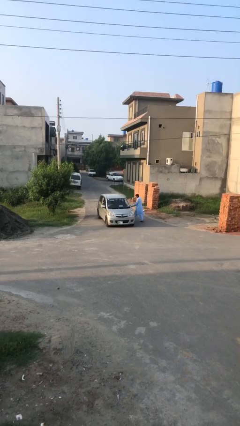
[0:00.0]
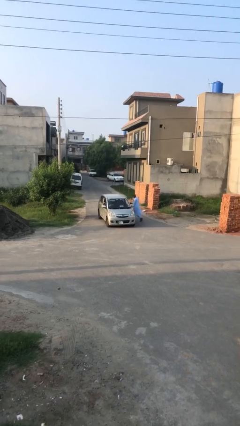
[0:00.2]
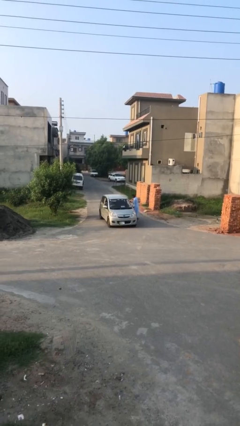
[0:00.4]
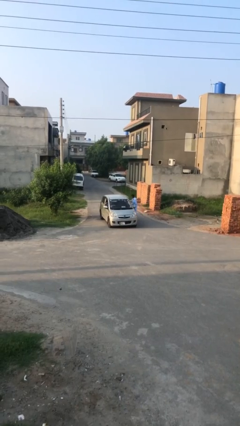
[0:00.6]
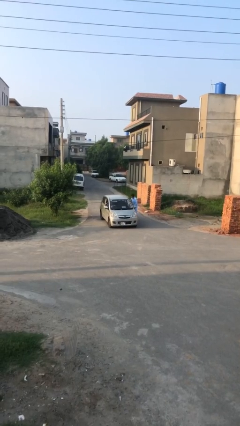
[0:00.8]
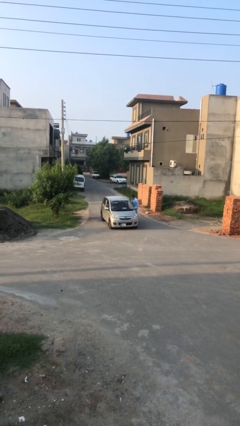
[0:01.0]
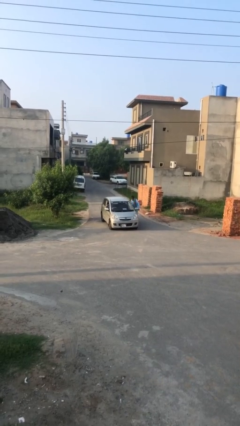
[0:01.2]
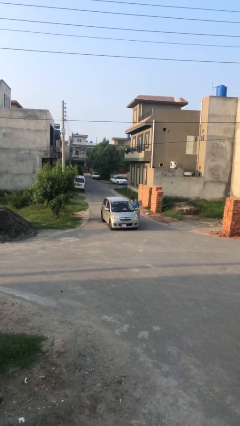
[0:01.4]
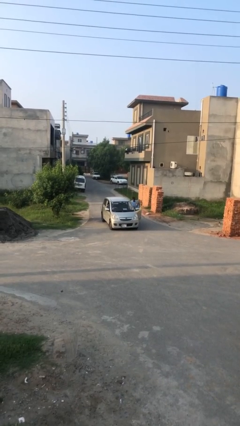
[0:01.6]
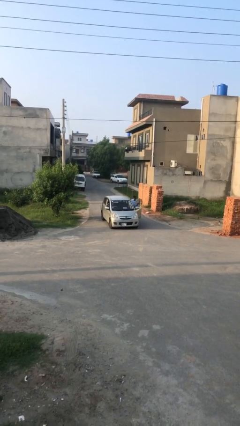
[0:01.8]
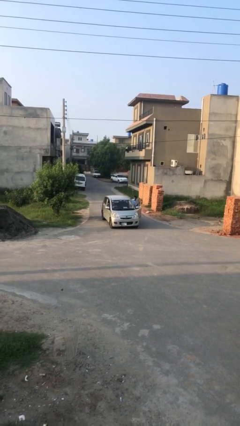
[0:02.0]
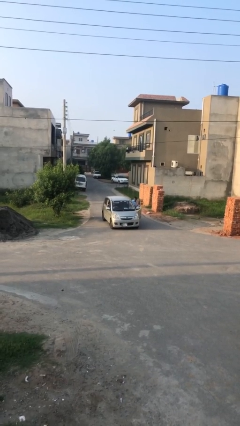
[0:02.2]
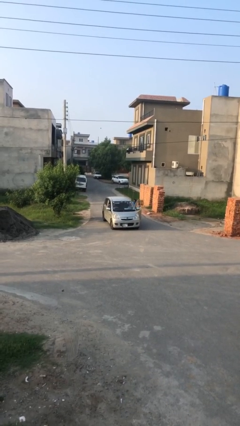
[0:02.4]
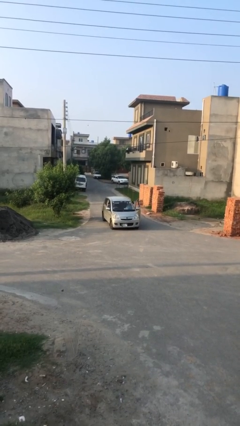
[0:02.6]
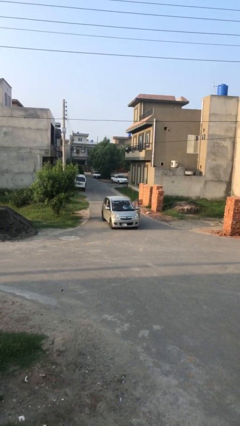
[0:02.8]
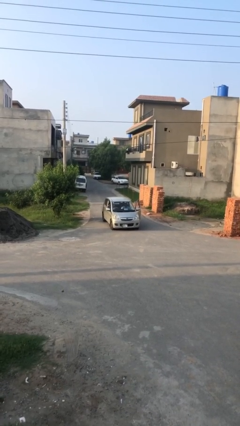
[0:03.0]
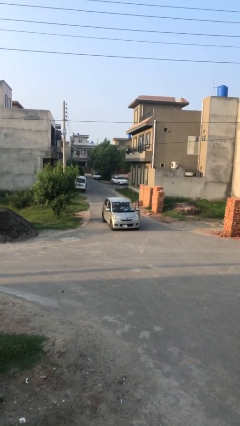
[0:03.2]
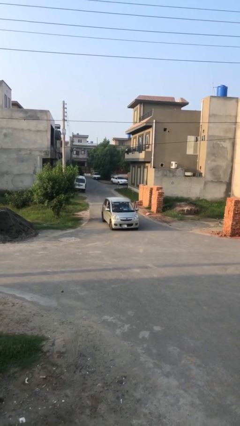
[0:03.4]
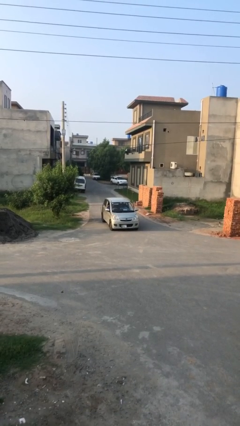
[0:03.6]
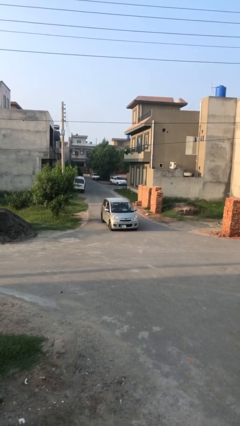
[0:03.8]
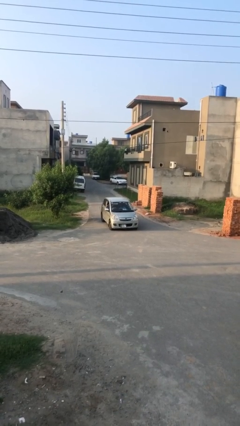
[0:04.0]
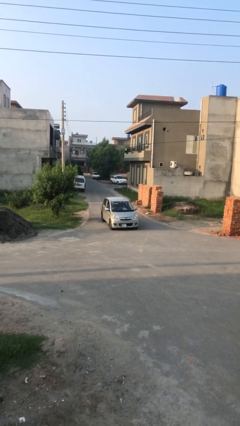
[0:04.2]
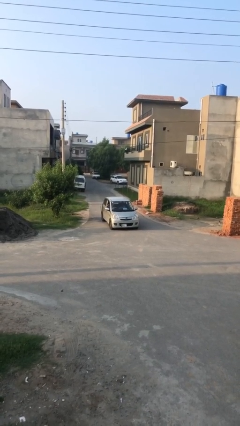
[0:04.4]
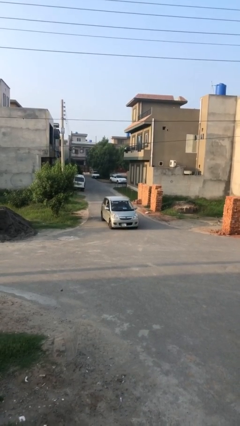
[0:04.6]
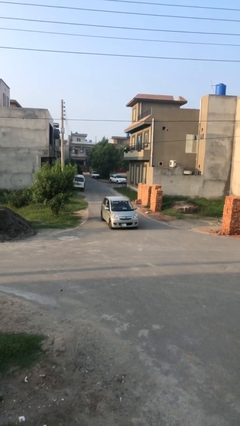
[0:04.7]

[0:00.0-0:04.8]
car picks up person

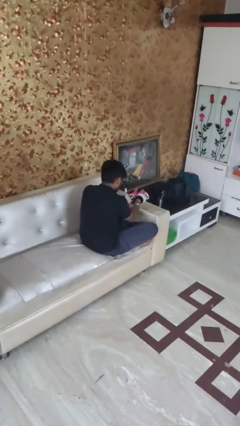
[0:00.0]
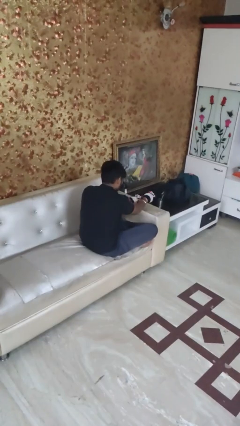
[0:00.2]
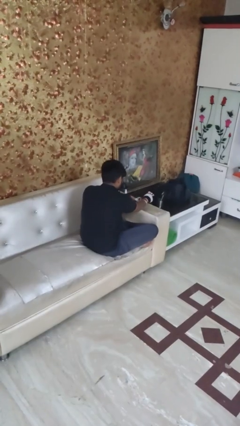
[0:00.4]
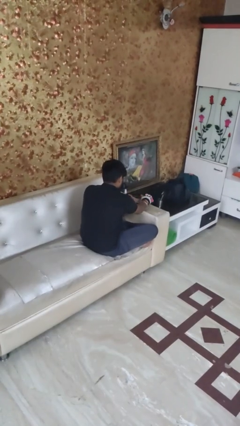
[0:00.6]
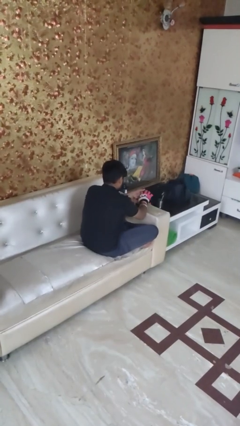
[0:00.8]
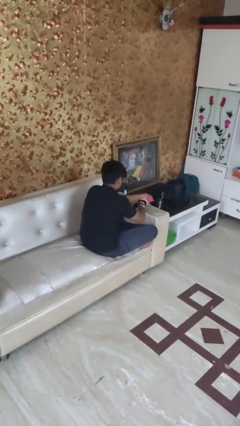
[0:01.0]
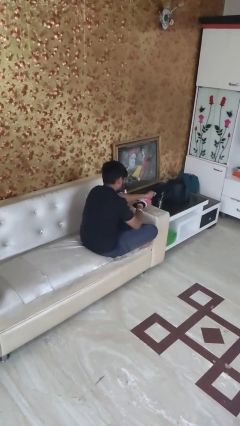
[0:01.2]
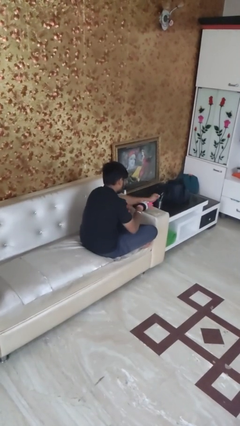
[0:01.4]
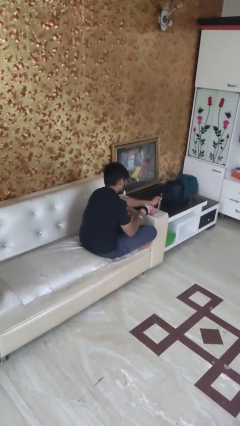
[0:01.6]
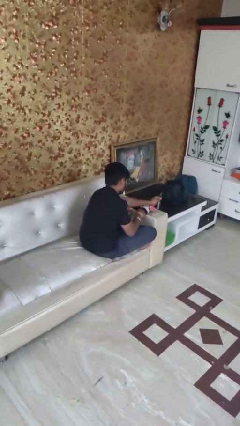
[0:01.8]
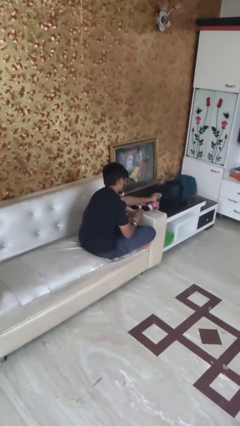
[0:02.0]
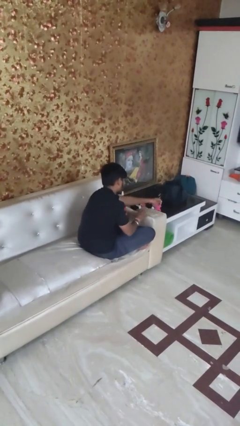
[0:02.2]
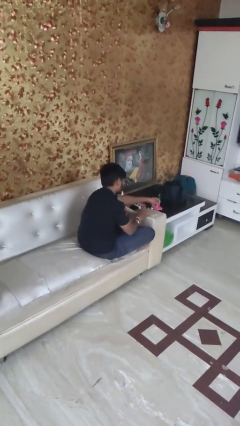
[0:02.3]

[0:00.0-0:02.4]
person takes off gloves

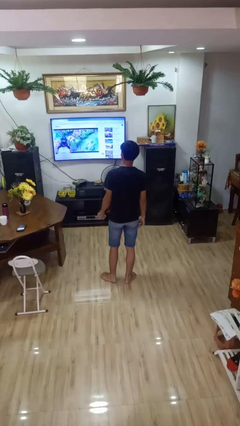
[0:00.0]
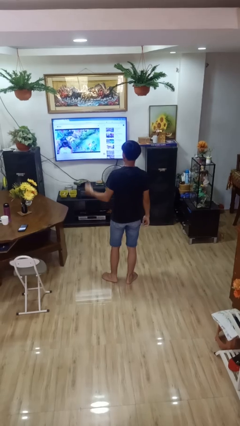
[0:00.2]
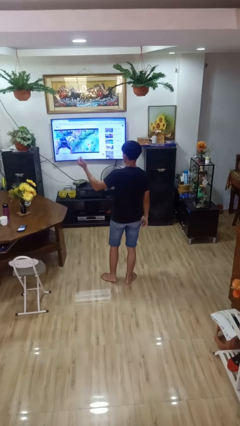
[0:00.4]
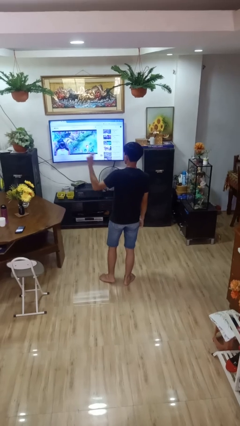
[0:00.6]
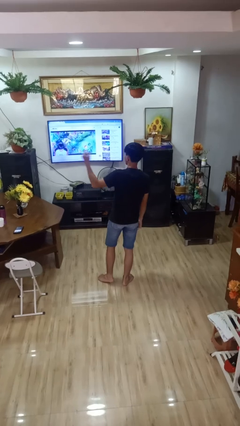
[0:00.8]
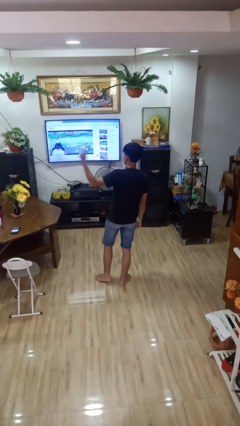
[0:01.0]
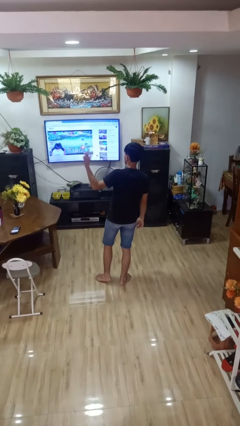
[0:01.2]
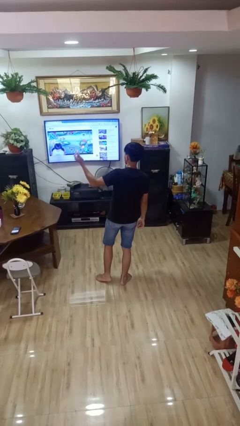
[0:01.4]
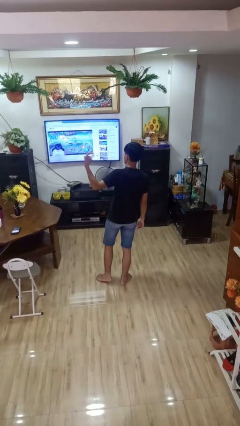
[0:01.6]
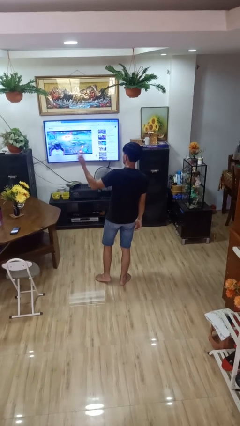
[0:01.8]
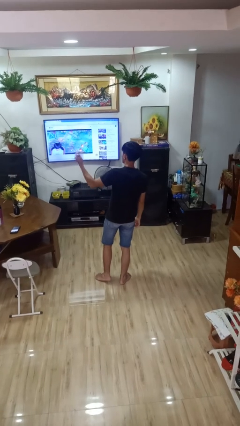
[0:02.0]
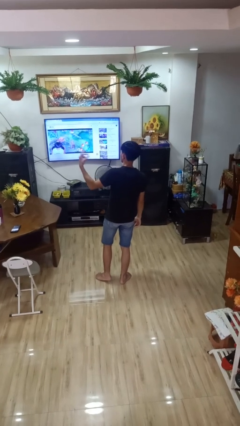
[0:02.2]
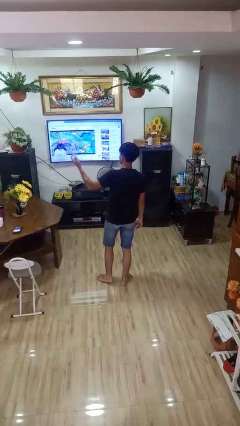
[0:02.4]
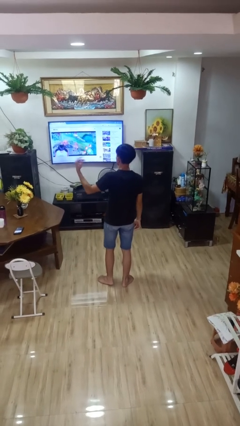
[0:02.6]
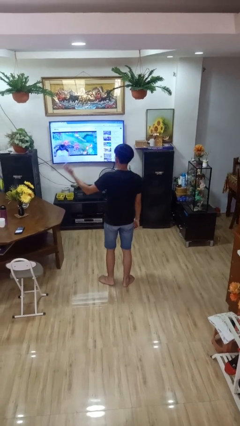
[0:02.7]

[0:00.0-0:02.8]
person snaps fingers

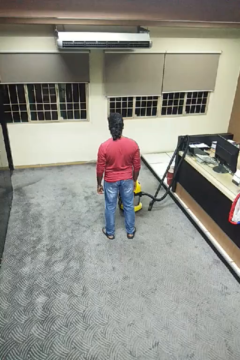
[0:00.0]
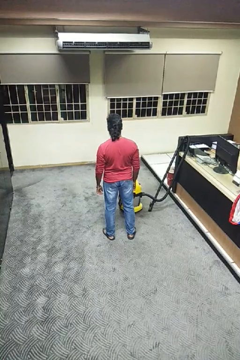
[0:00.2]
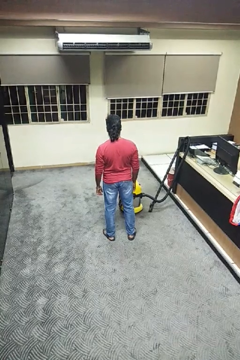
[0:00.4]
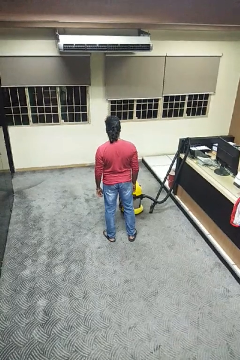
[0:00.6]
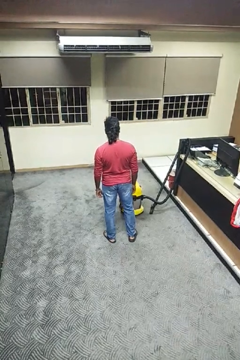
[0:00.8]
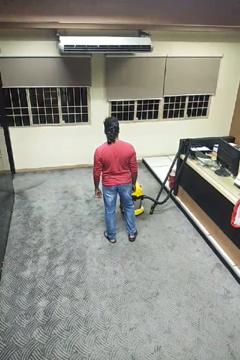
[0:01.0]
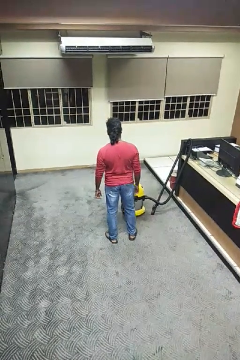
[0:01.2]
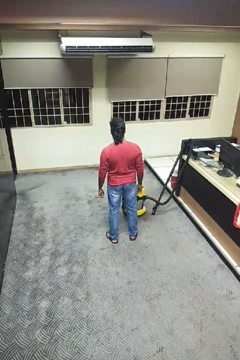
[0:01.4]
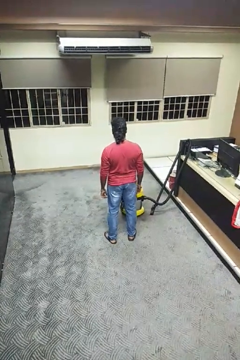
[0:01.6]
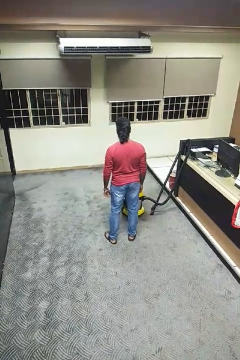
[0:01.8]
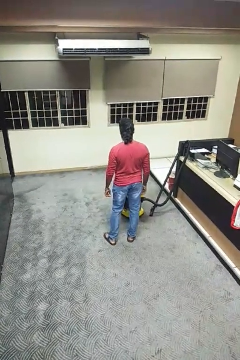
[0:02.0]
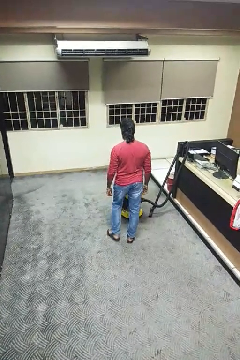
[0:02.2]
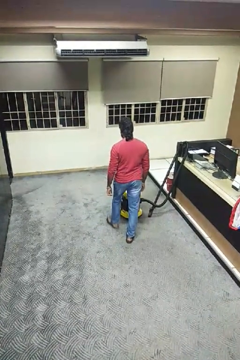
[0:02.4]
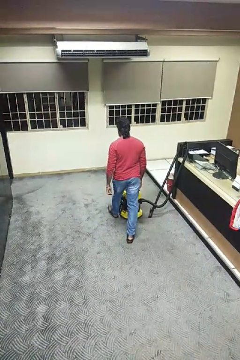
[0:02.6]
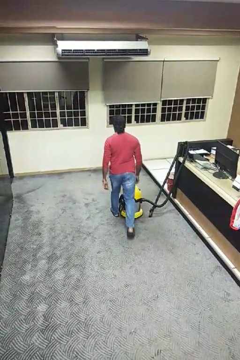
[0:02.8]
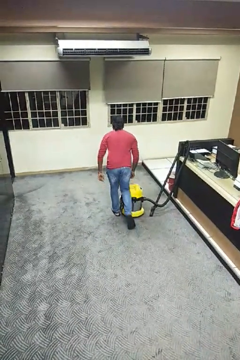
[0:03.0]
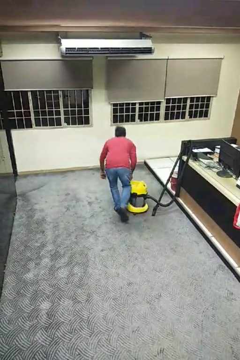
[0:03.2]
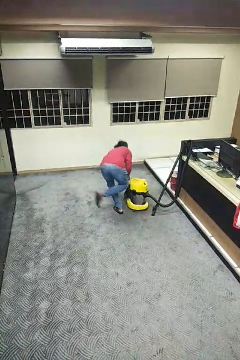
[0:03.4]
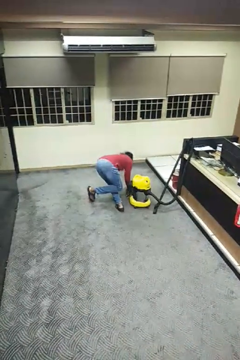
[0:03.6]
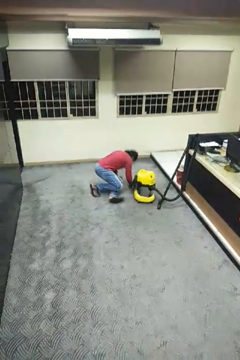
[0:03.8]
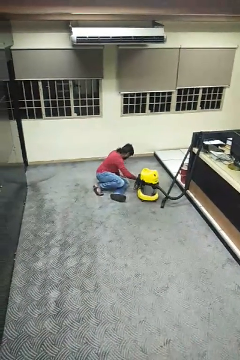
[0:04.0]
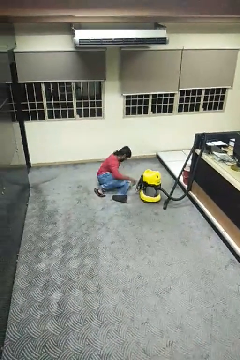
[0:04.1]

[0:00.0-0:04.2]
person trips on object on floor

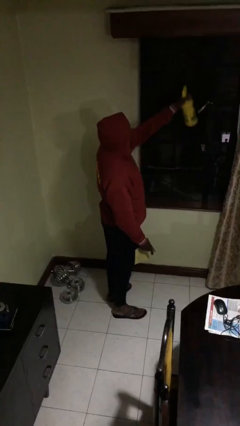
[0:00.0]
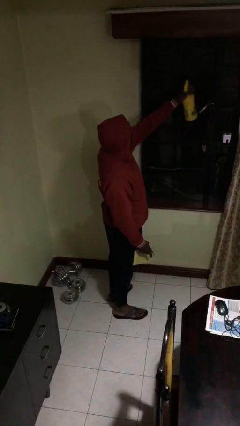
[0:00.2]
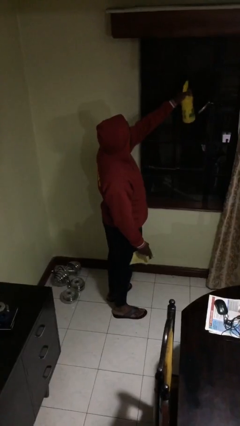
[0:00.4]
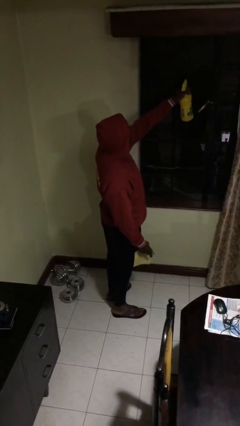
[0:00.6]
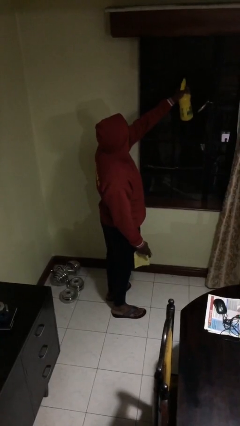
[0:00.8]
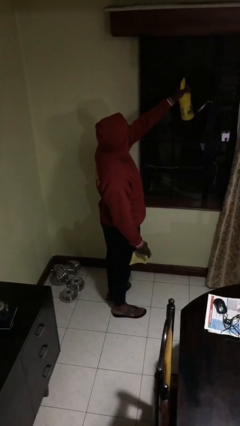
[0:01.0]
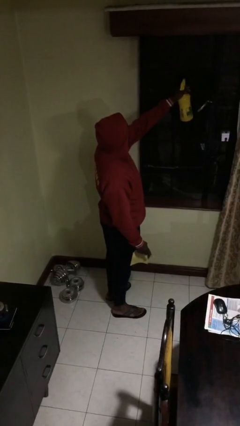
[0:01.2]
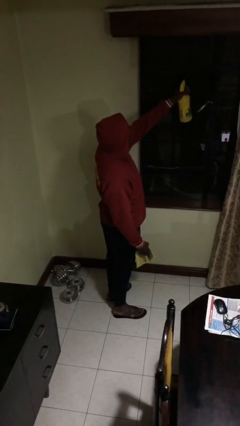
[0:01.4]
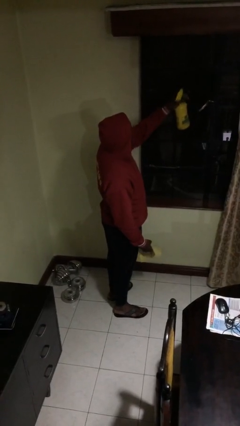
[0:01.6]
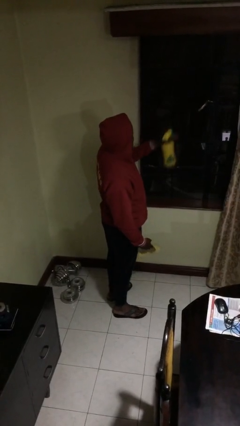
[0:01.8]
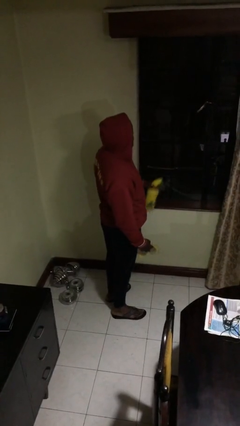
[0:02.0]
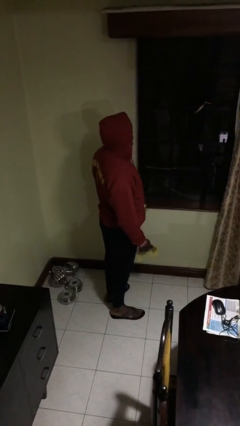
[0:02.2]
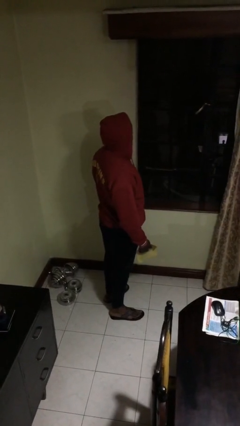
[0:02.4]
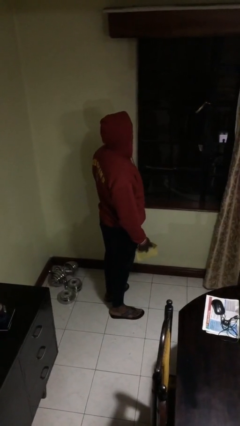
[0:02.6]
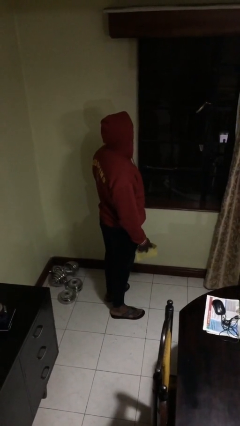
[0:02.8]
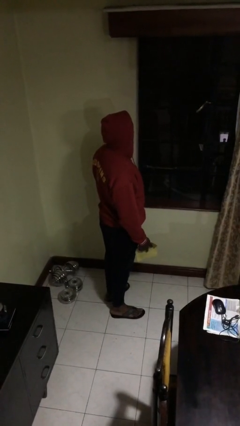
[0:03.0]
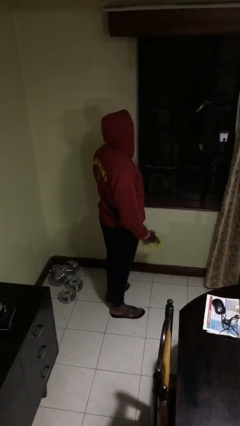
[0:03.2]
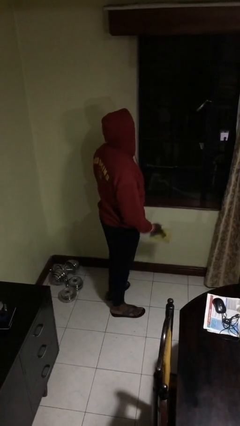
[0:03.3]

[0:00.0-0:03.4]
person sprays from bottle

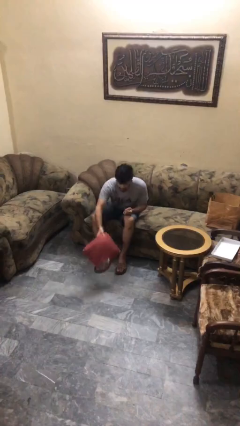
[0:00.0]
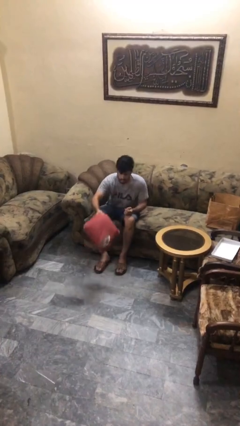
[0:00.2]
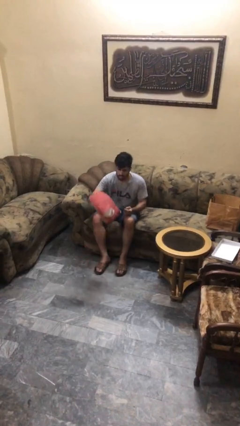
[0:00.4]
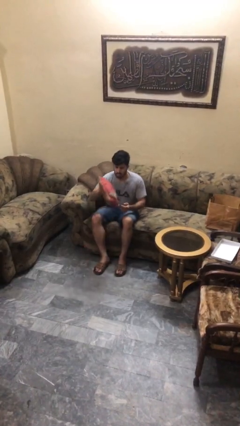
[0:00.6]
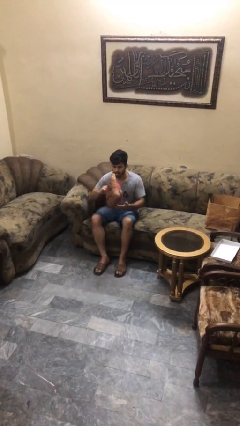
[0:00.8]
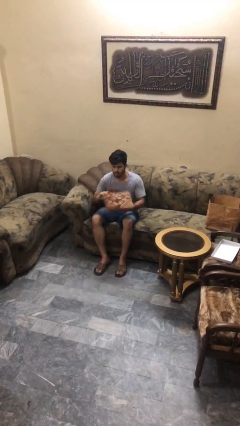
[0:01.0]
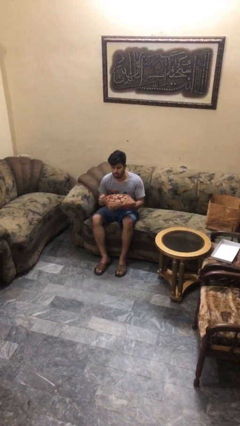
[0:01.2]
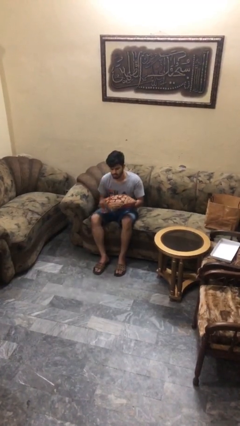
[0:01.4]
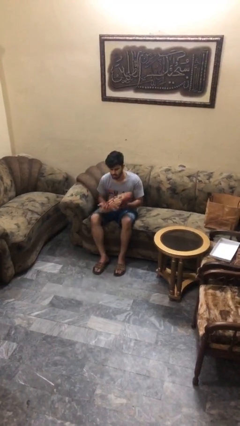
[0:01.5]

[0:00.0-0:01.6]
person picks up object from floor
